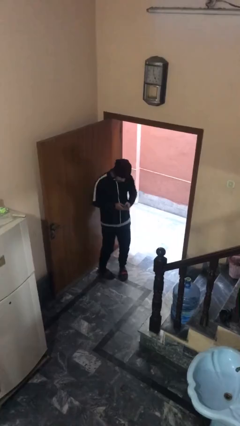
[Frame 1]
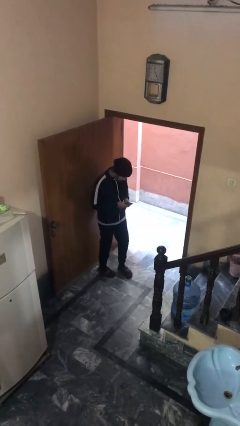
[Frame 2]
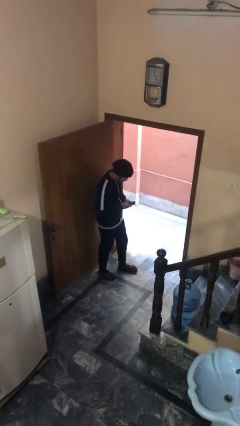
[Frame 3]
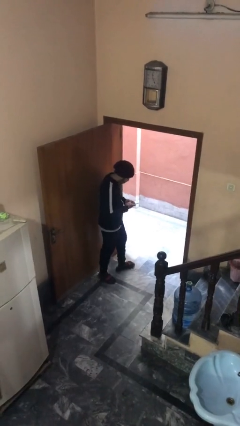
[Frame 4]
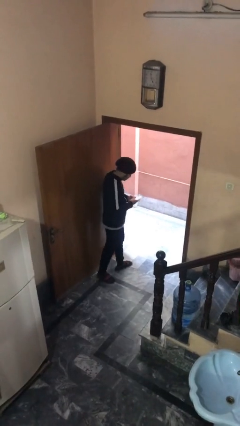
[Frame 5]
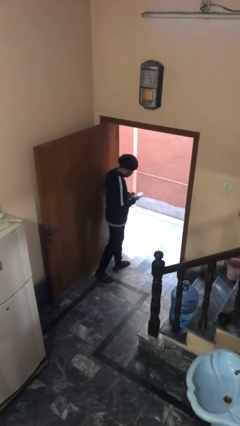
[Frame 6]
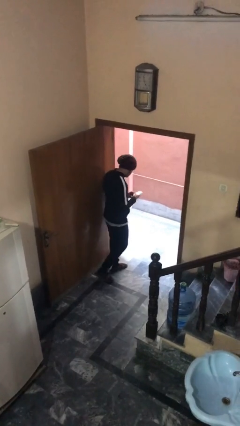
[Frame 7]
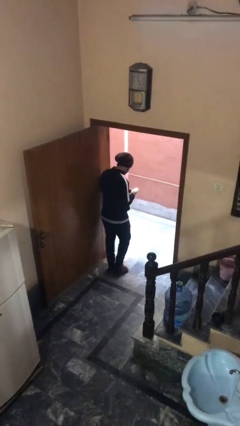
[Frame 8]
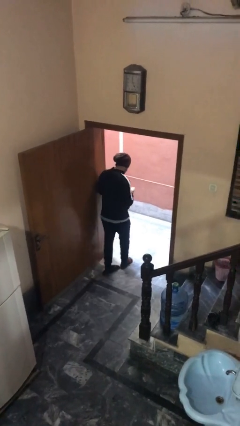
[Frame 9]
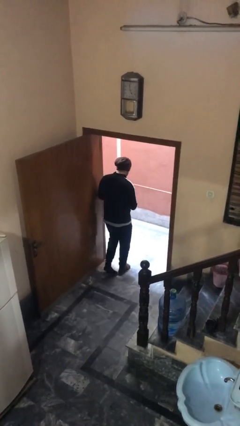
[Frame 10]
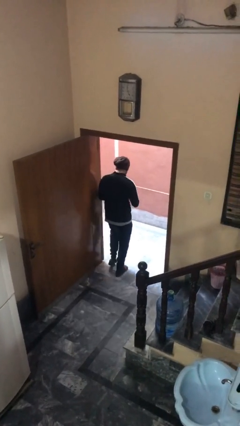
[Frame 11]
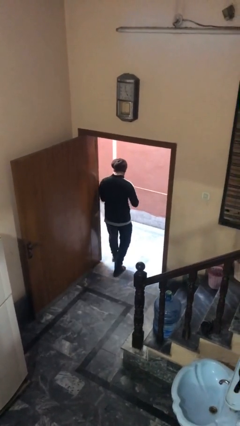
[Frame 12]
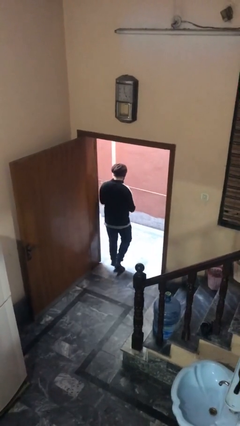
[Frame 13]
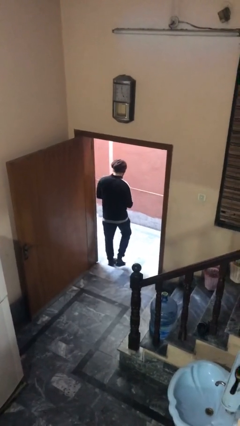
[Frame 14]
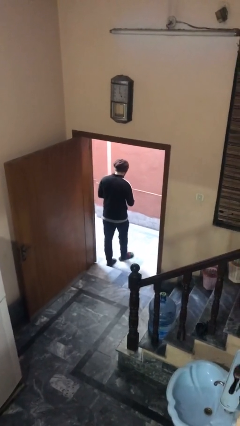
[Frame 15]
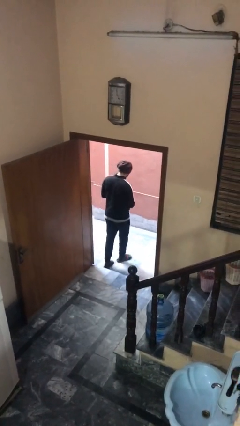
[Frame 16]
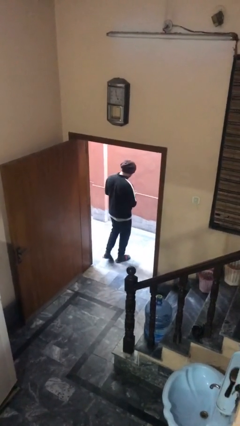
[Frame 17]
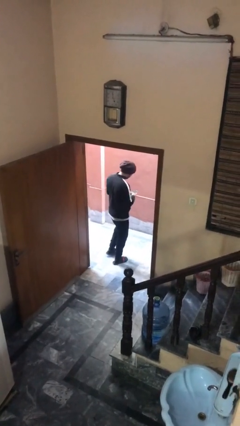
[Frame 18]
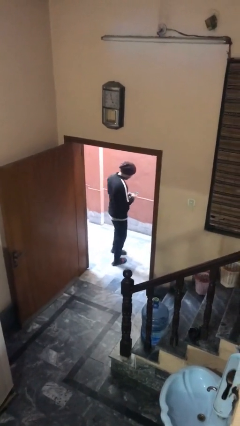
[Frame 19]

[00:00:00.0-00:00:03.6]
person exits scene through structure

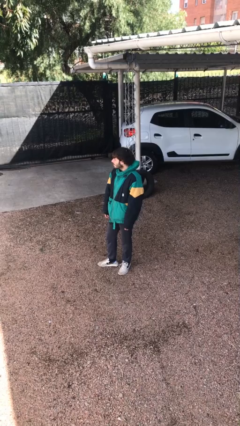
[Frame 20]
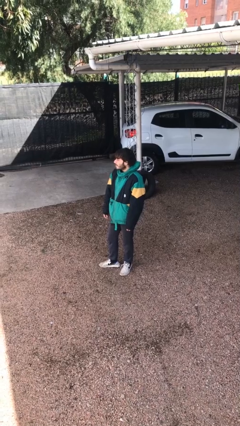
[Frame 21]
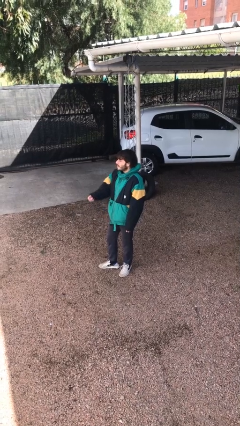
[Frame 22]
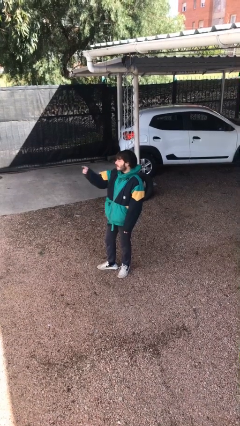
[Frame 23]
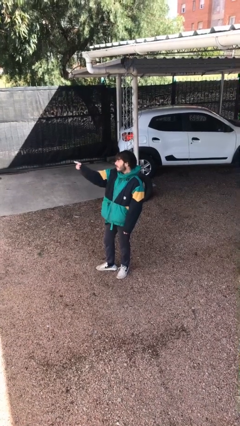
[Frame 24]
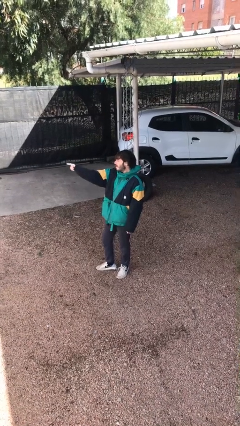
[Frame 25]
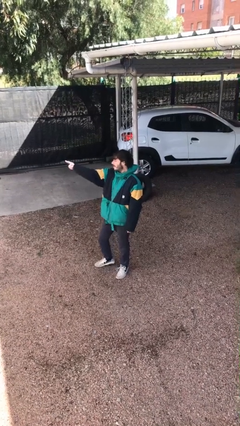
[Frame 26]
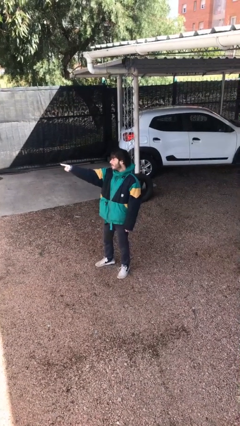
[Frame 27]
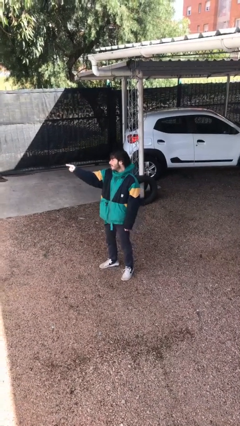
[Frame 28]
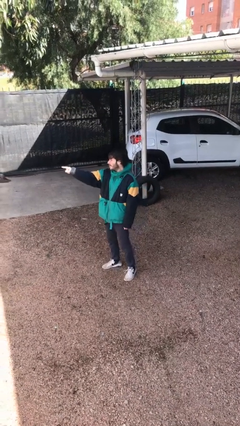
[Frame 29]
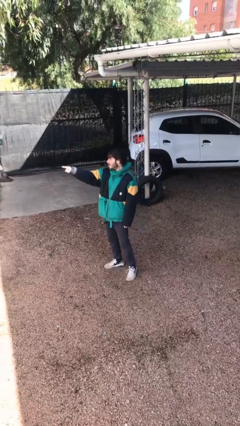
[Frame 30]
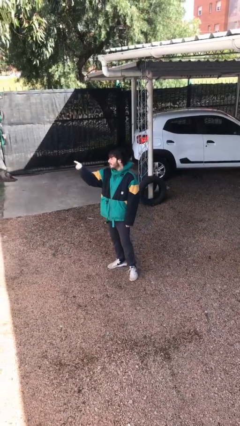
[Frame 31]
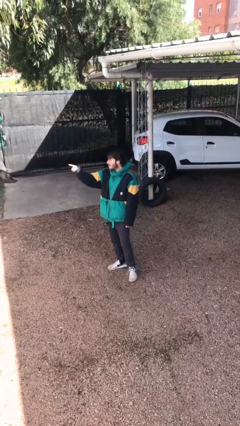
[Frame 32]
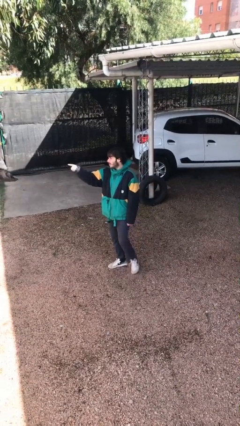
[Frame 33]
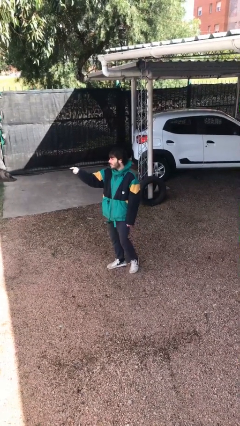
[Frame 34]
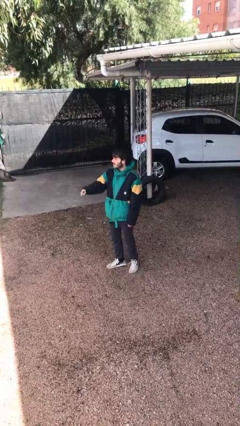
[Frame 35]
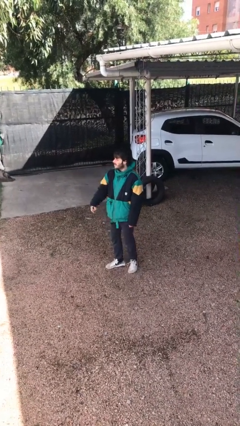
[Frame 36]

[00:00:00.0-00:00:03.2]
person points at person

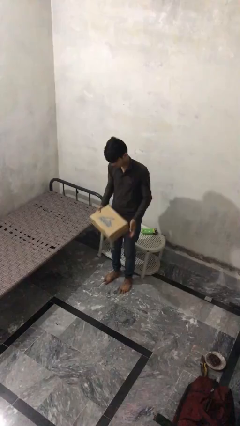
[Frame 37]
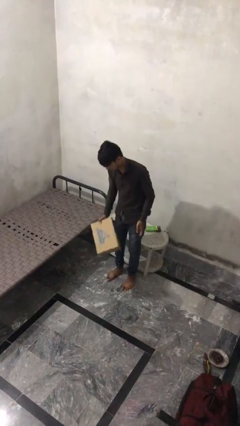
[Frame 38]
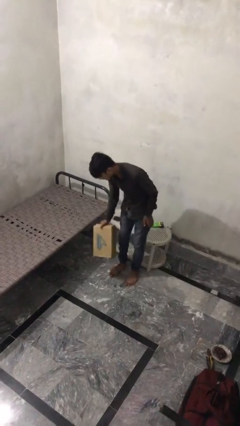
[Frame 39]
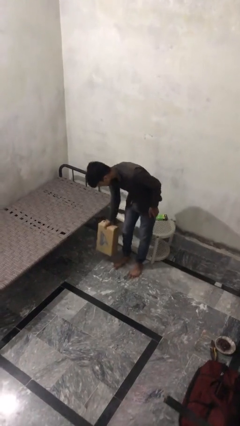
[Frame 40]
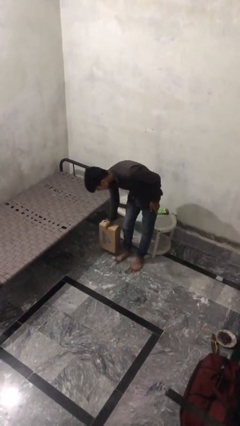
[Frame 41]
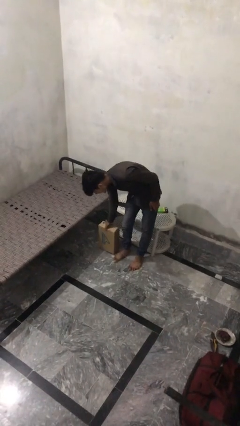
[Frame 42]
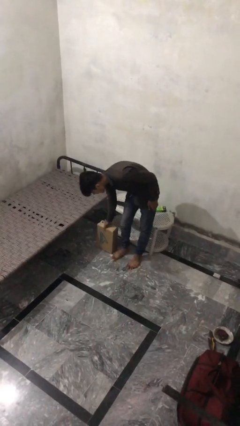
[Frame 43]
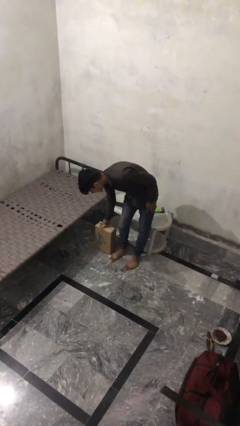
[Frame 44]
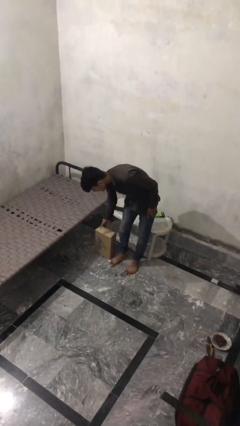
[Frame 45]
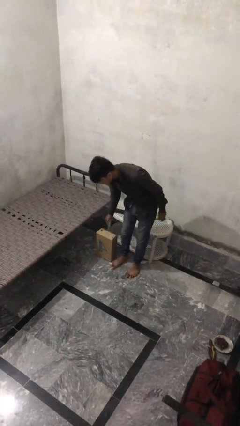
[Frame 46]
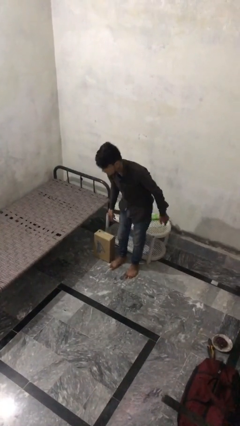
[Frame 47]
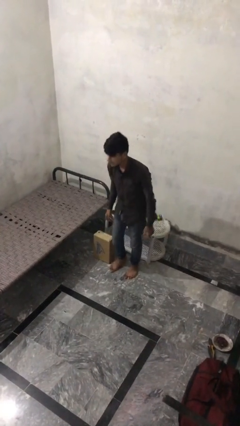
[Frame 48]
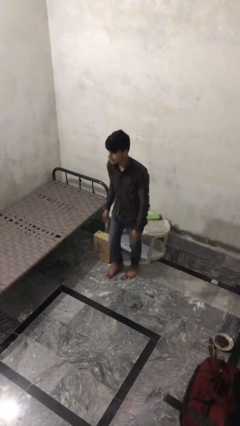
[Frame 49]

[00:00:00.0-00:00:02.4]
person puts down object on floor

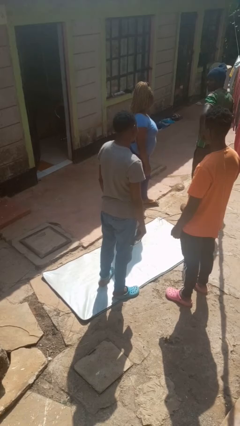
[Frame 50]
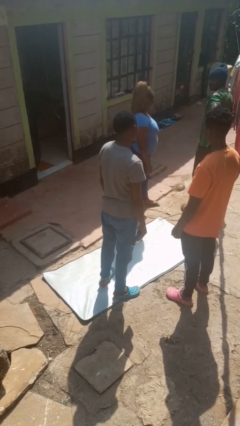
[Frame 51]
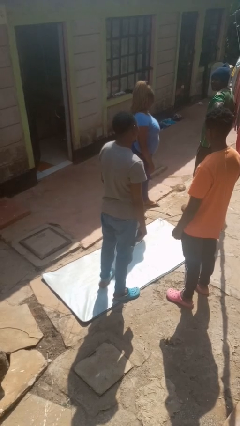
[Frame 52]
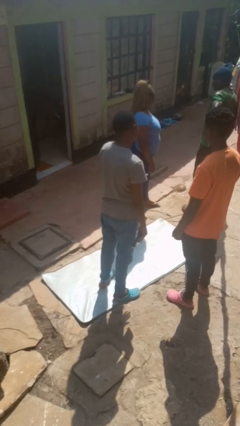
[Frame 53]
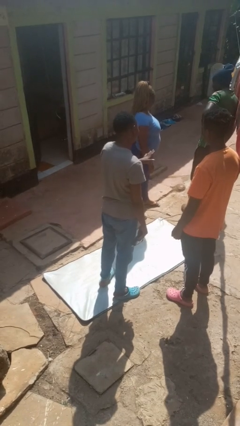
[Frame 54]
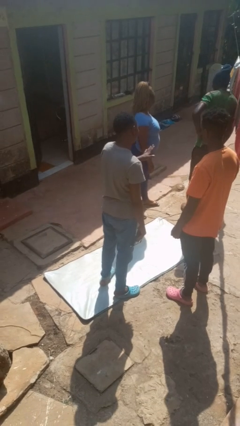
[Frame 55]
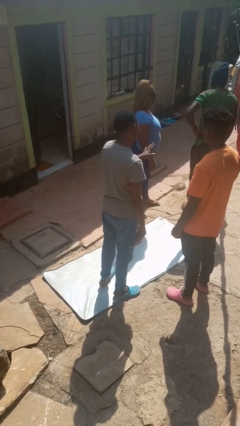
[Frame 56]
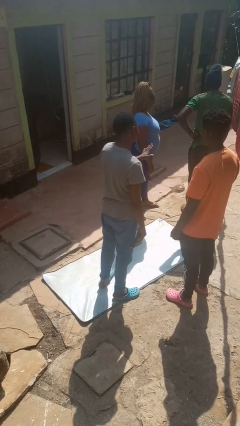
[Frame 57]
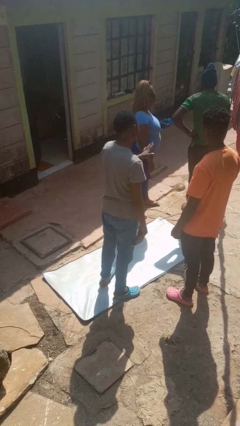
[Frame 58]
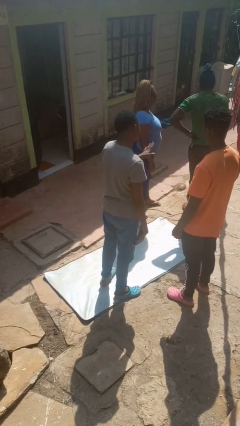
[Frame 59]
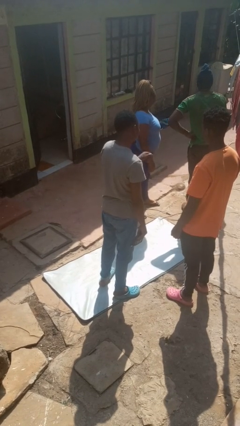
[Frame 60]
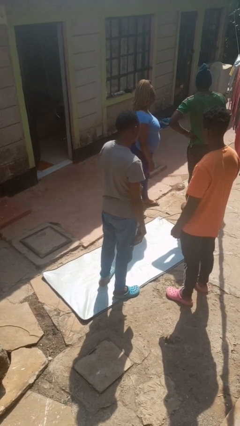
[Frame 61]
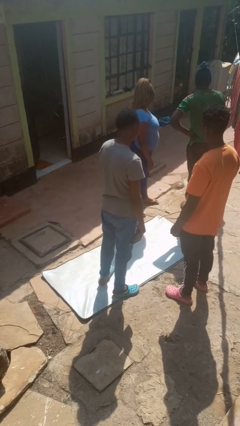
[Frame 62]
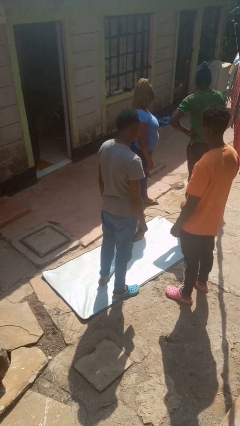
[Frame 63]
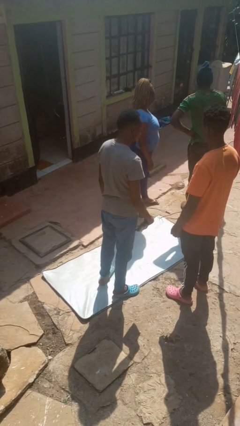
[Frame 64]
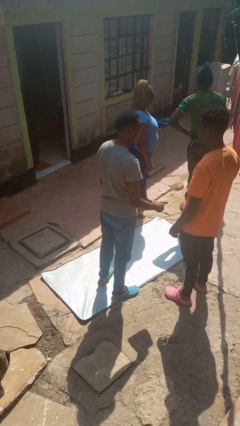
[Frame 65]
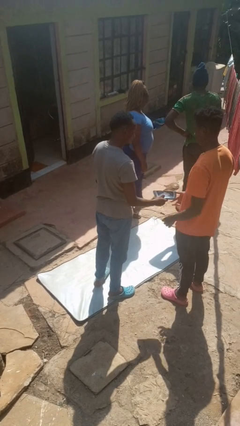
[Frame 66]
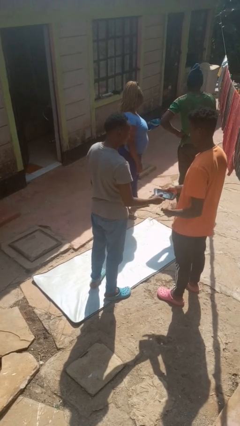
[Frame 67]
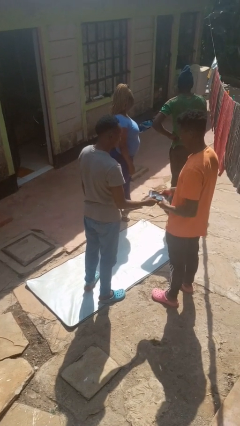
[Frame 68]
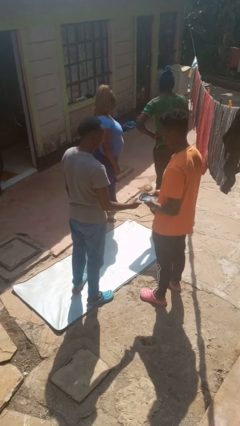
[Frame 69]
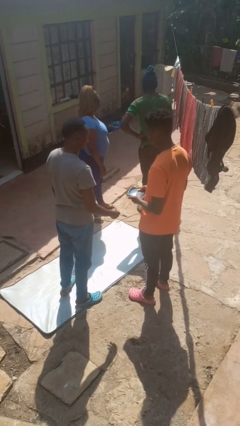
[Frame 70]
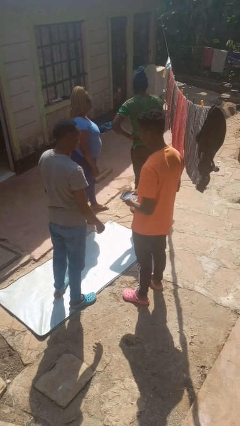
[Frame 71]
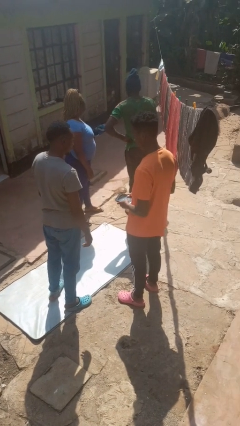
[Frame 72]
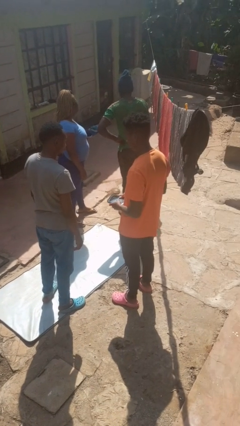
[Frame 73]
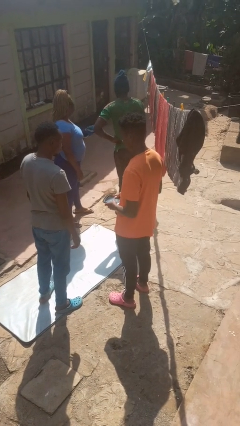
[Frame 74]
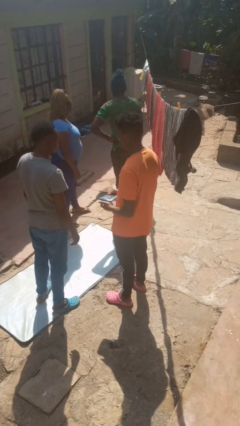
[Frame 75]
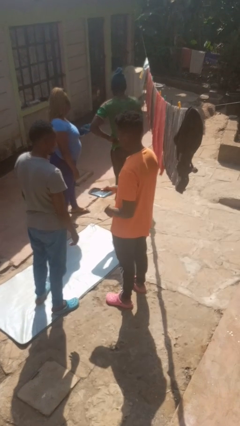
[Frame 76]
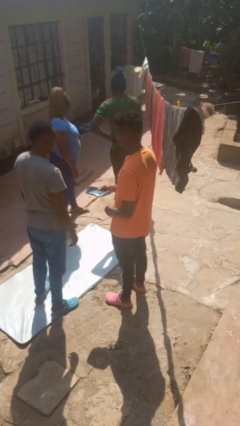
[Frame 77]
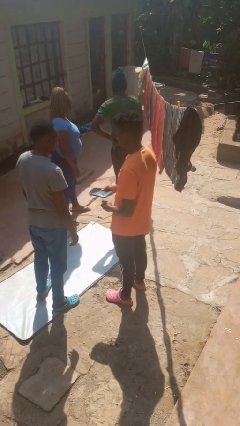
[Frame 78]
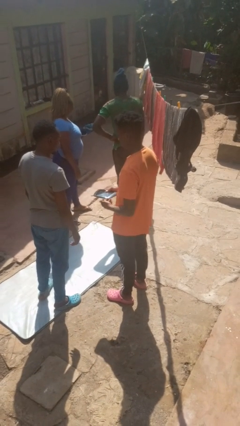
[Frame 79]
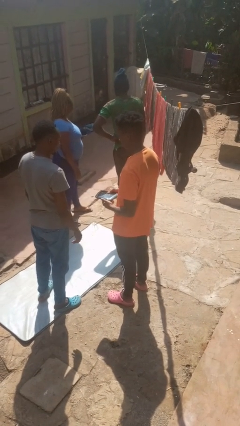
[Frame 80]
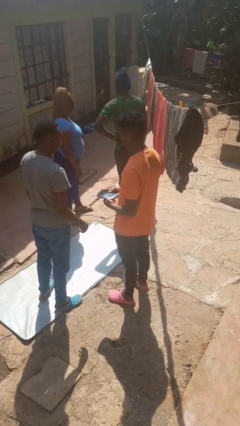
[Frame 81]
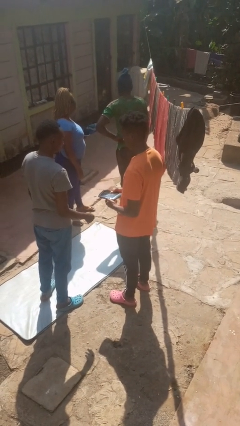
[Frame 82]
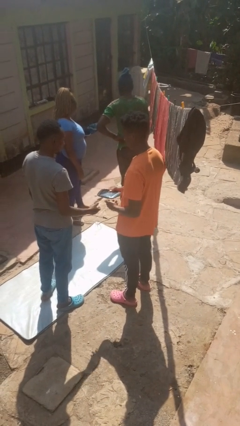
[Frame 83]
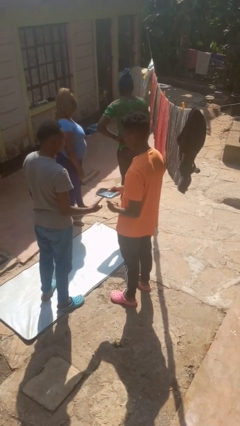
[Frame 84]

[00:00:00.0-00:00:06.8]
person transfers object to person

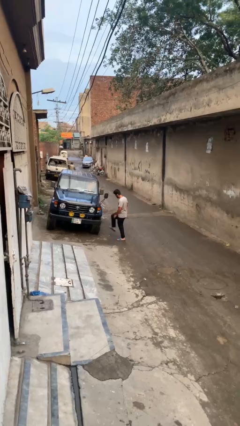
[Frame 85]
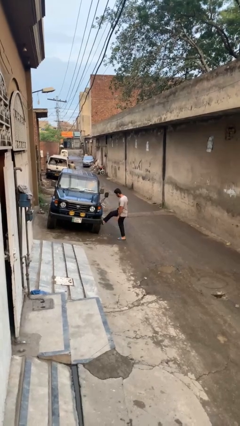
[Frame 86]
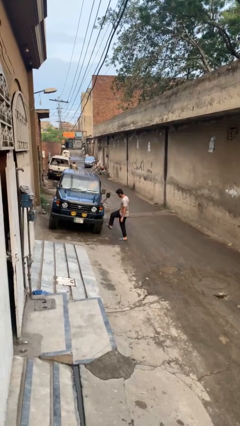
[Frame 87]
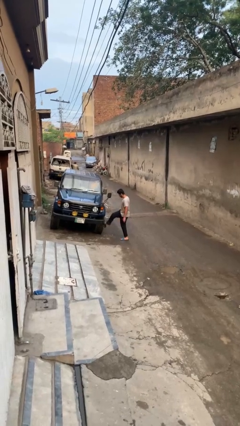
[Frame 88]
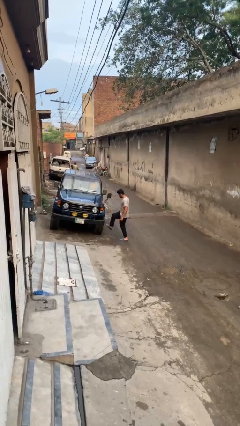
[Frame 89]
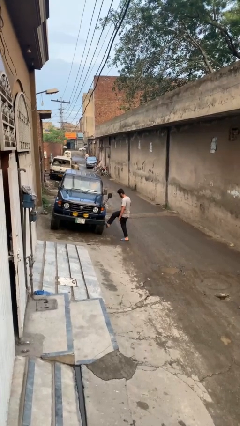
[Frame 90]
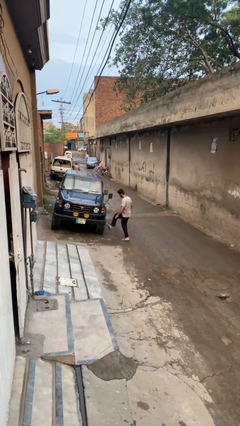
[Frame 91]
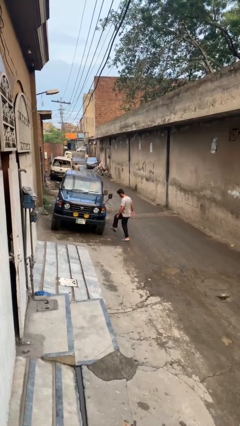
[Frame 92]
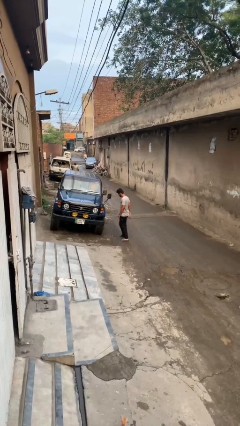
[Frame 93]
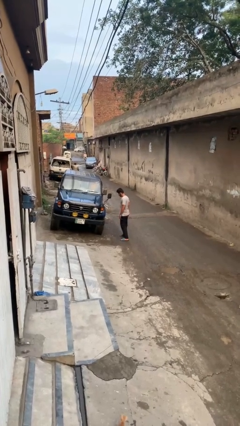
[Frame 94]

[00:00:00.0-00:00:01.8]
person kicks car tires
